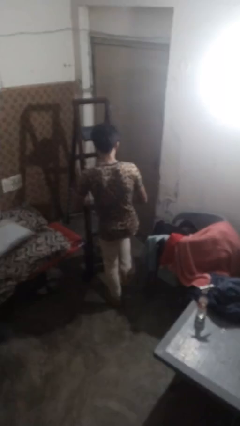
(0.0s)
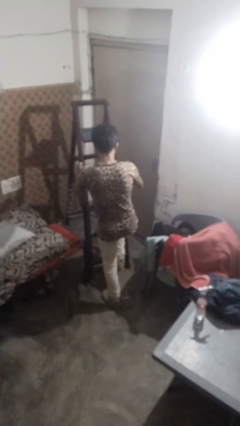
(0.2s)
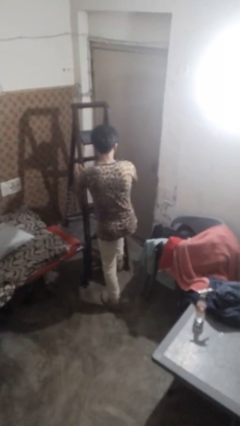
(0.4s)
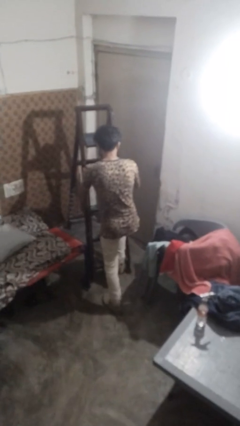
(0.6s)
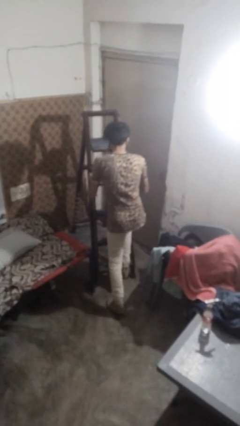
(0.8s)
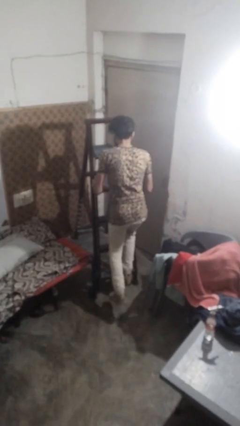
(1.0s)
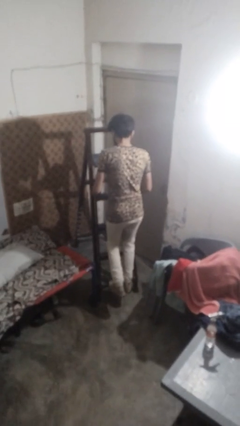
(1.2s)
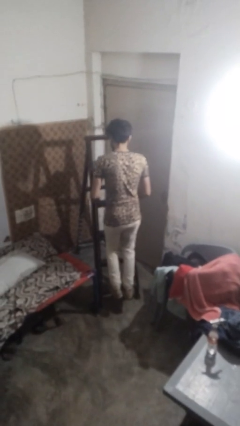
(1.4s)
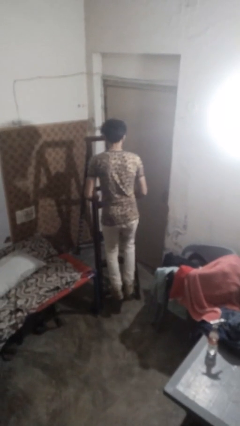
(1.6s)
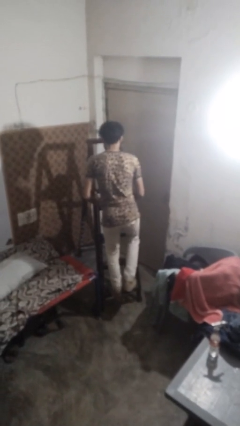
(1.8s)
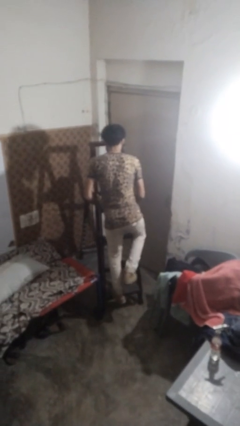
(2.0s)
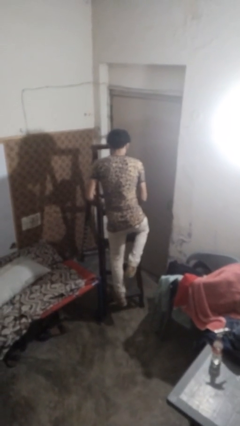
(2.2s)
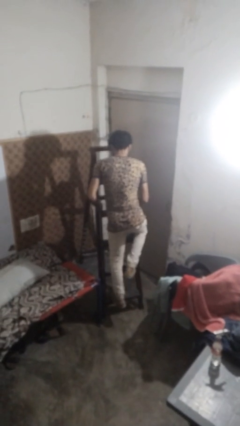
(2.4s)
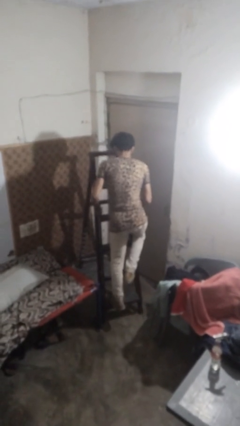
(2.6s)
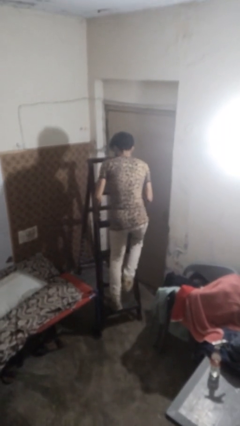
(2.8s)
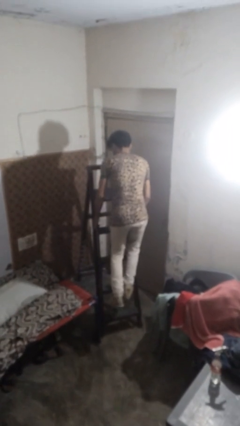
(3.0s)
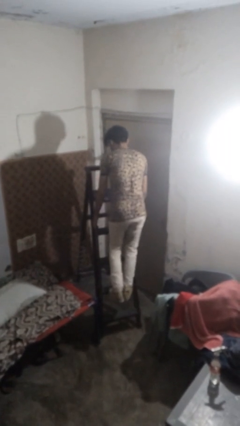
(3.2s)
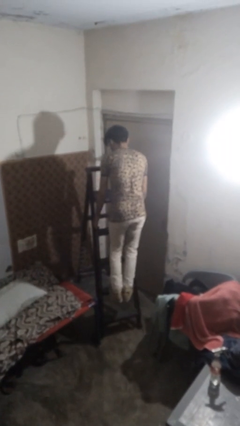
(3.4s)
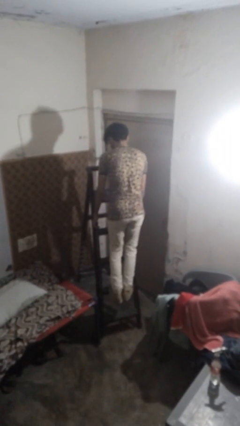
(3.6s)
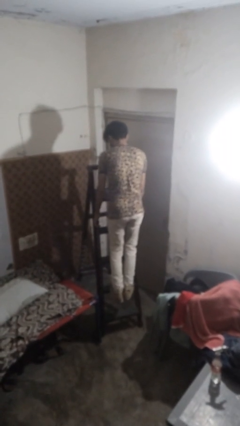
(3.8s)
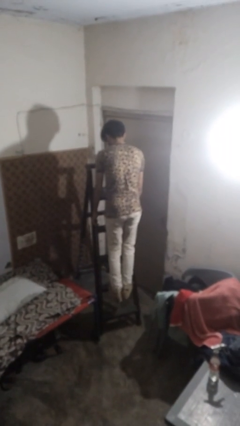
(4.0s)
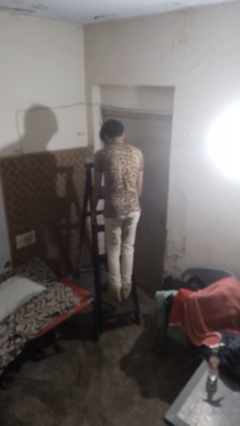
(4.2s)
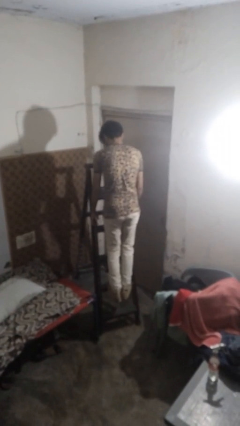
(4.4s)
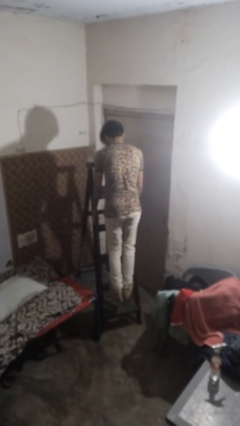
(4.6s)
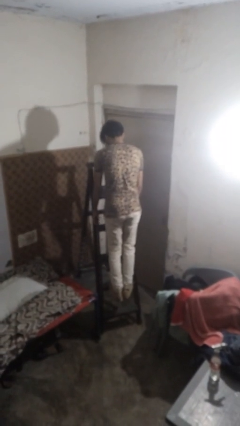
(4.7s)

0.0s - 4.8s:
person climbs up ladder

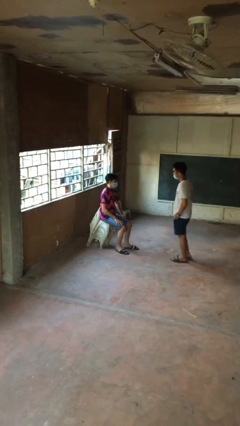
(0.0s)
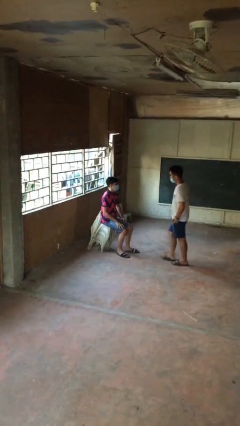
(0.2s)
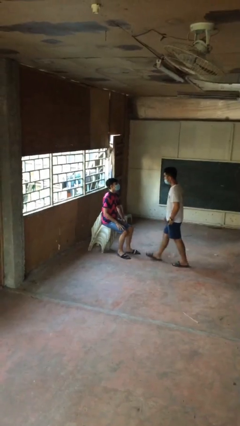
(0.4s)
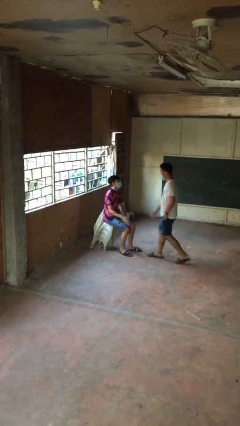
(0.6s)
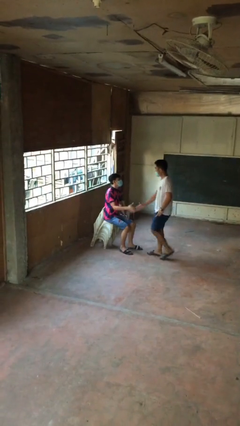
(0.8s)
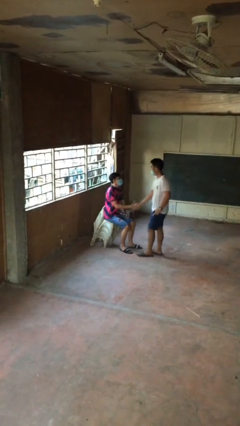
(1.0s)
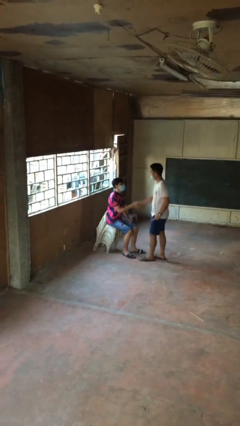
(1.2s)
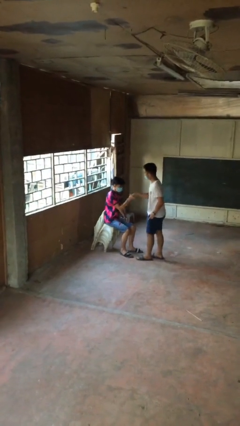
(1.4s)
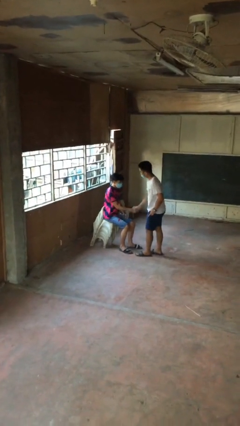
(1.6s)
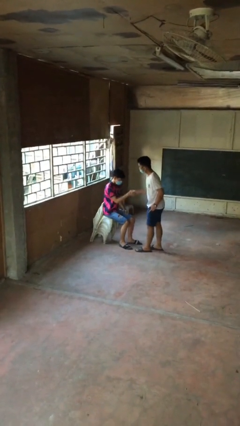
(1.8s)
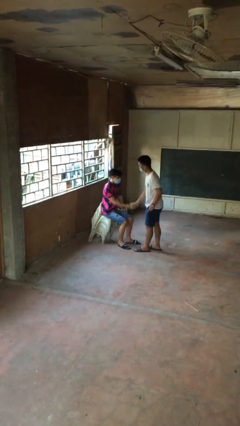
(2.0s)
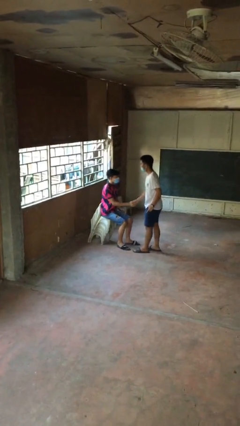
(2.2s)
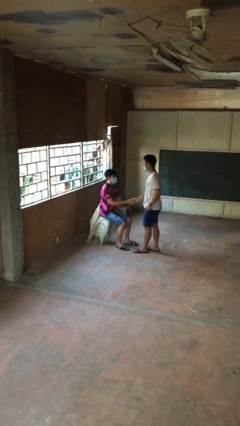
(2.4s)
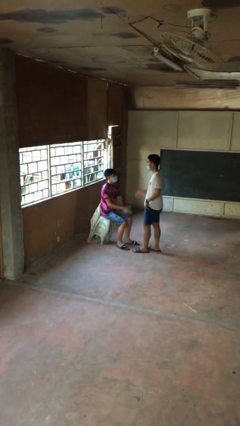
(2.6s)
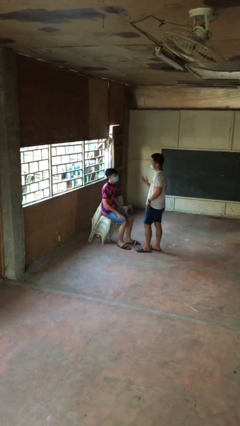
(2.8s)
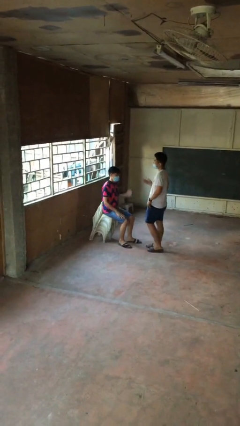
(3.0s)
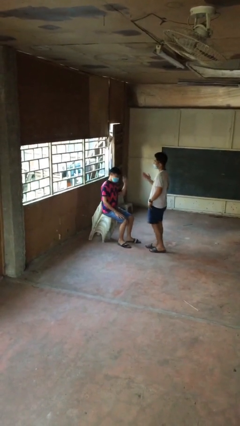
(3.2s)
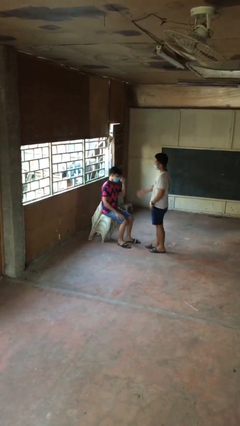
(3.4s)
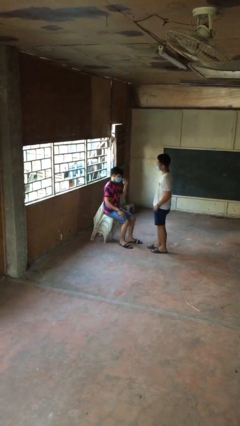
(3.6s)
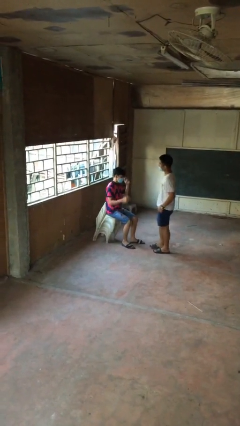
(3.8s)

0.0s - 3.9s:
person shakes hand

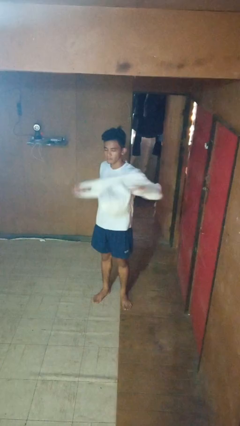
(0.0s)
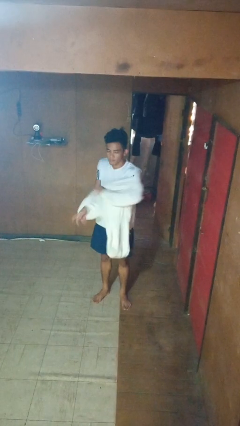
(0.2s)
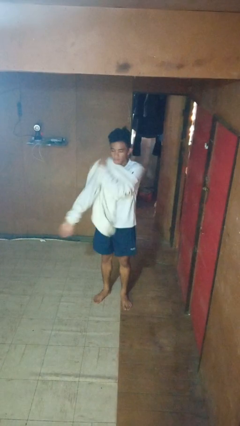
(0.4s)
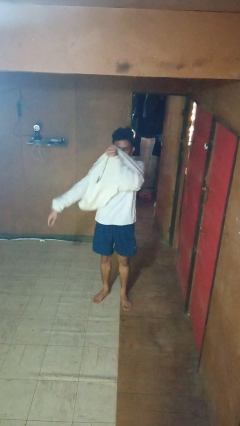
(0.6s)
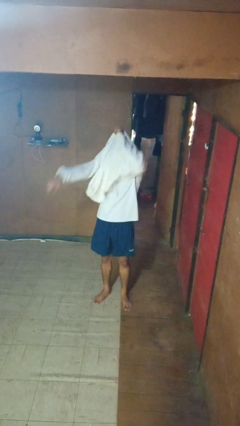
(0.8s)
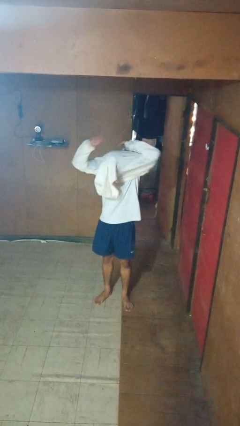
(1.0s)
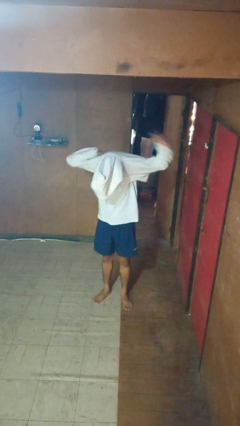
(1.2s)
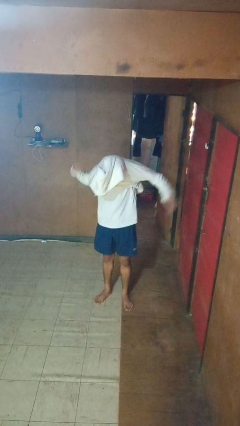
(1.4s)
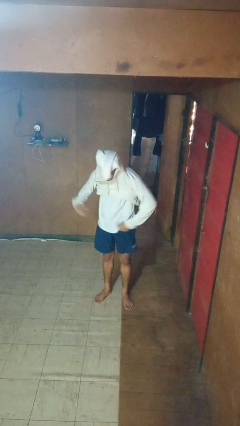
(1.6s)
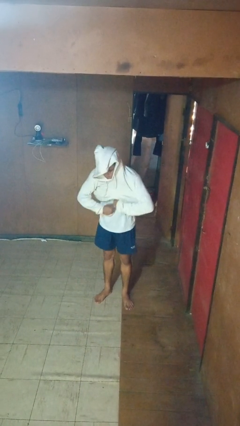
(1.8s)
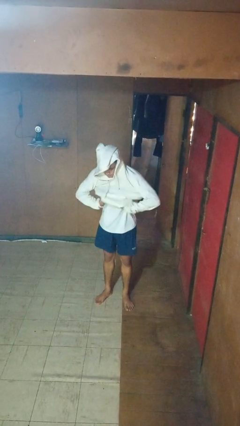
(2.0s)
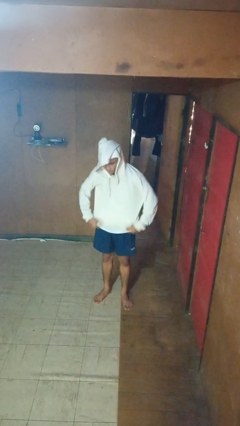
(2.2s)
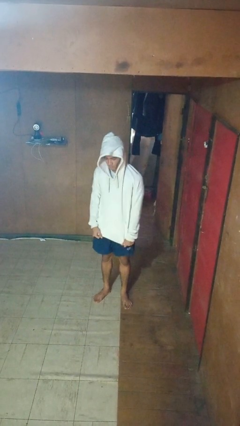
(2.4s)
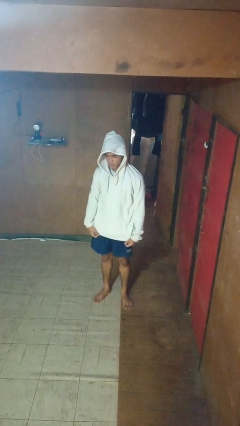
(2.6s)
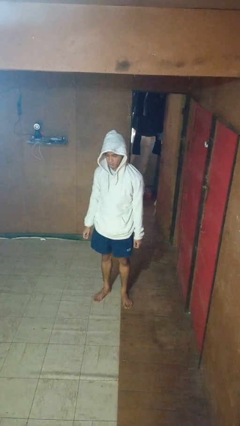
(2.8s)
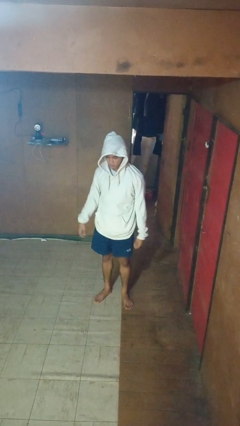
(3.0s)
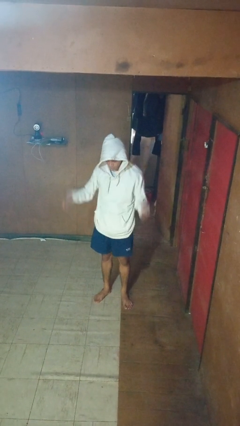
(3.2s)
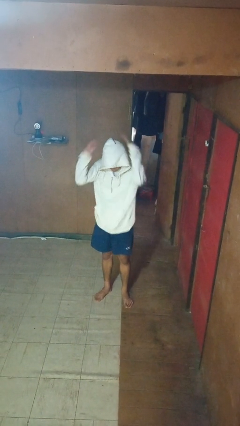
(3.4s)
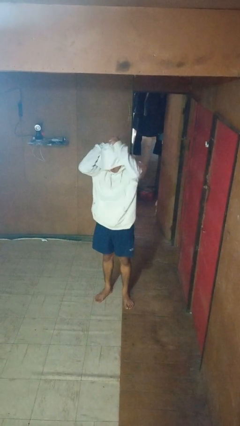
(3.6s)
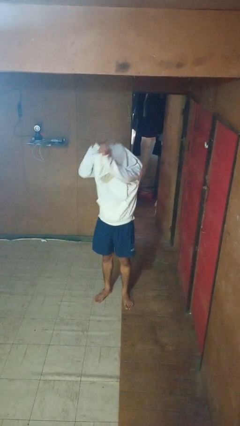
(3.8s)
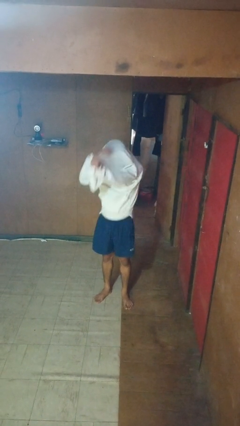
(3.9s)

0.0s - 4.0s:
person puts on hoodie

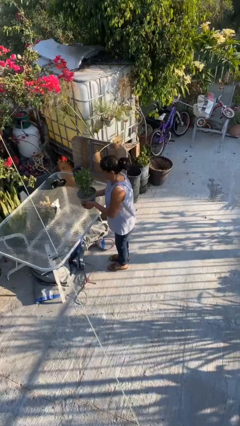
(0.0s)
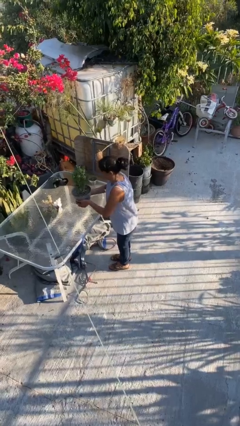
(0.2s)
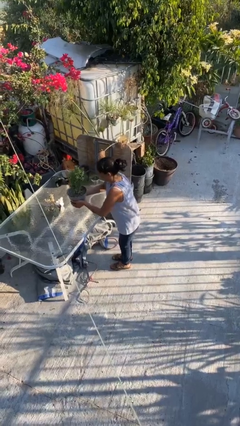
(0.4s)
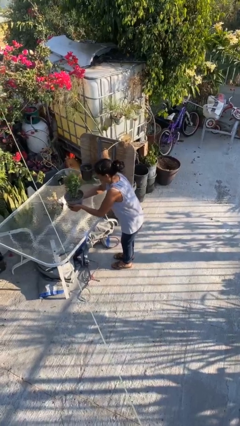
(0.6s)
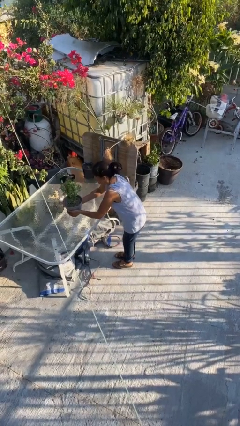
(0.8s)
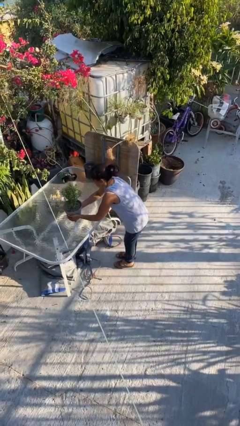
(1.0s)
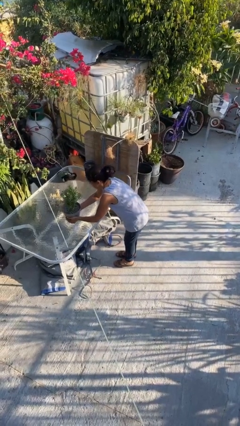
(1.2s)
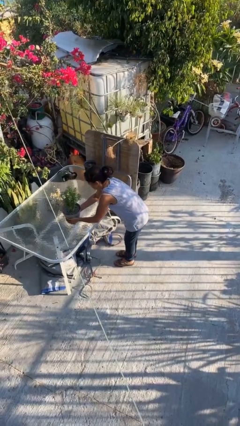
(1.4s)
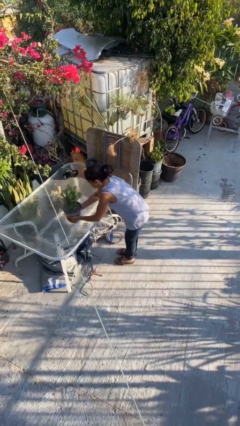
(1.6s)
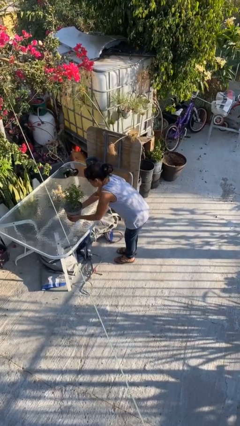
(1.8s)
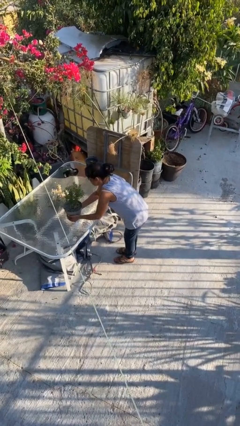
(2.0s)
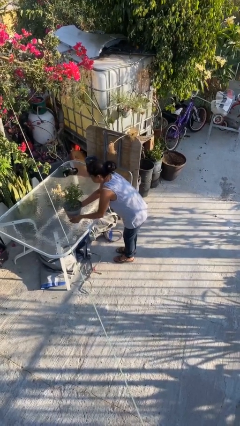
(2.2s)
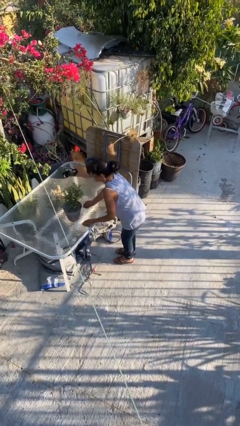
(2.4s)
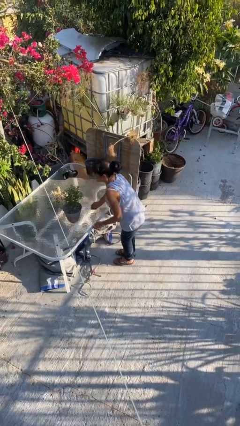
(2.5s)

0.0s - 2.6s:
person puts down object on table

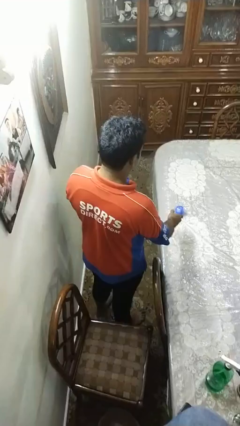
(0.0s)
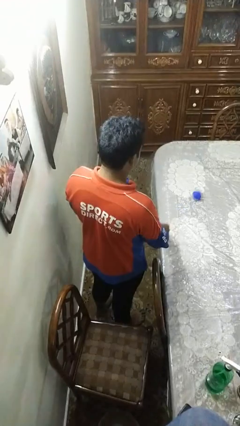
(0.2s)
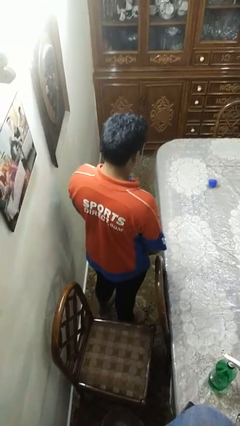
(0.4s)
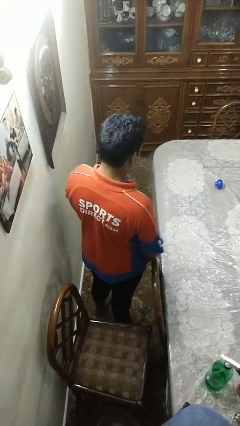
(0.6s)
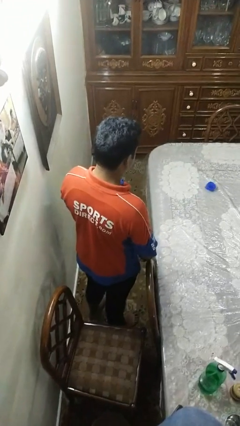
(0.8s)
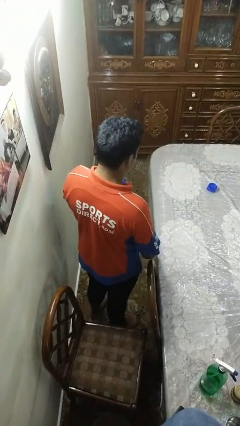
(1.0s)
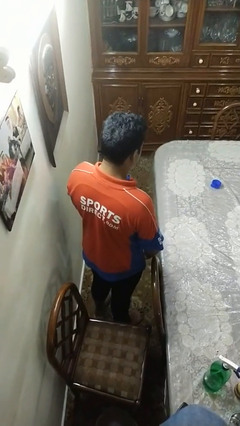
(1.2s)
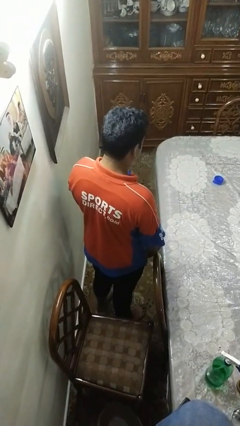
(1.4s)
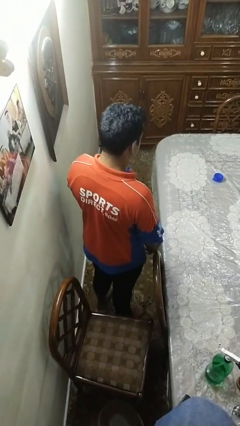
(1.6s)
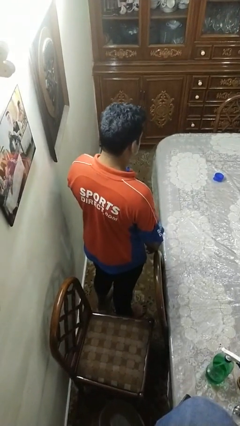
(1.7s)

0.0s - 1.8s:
person throws object on table

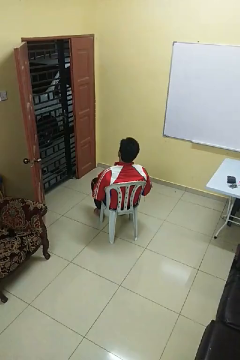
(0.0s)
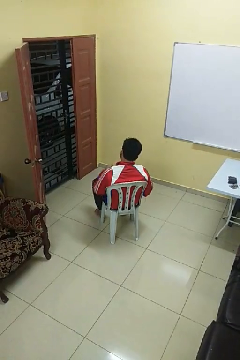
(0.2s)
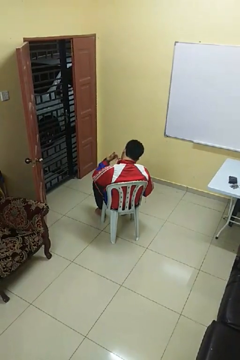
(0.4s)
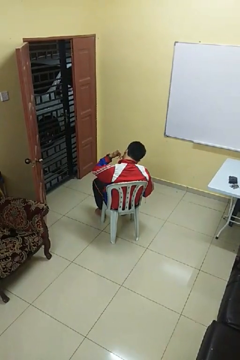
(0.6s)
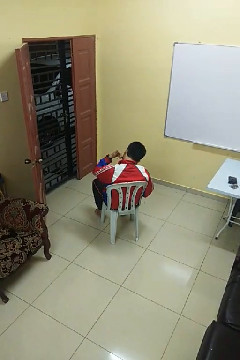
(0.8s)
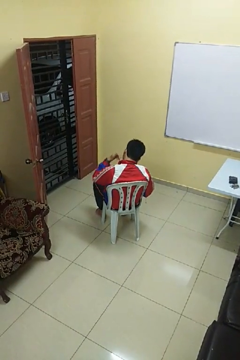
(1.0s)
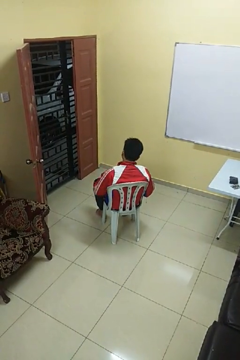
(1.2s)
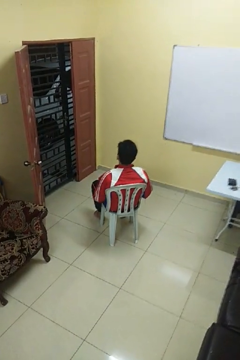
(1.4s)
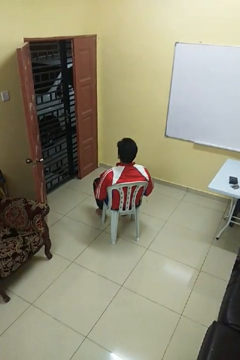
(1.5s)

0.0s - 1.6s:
person gestures call me
